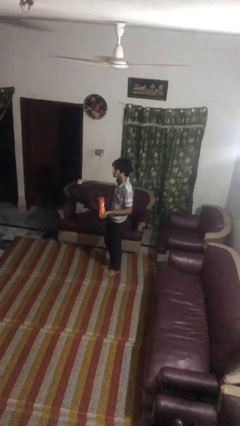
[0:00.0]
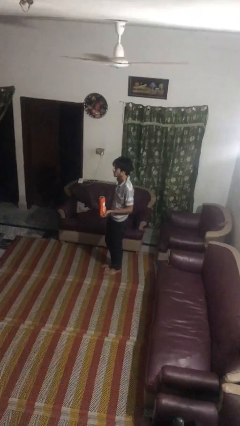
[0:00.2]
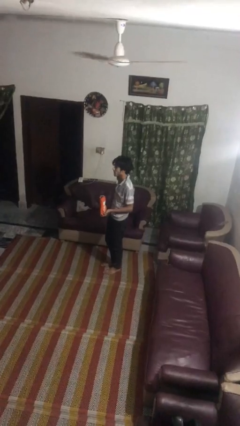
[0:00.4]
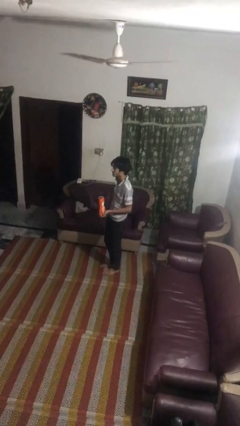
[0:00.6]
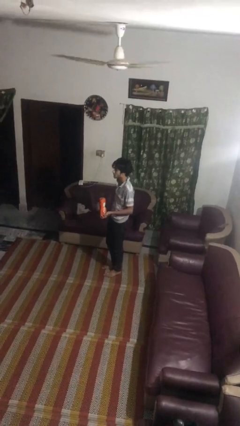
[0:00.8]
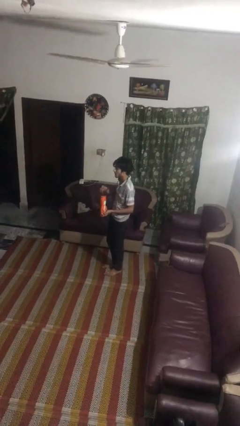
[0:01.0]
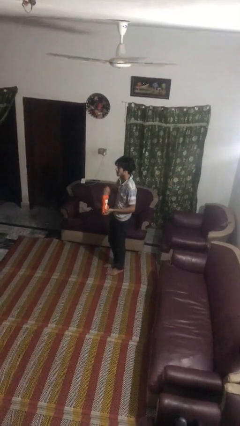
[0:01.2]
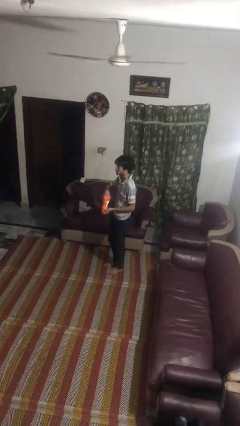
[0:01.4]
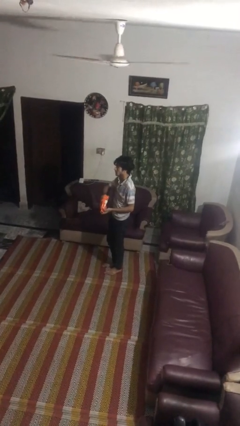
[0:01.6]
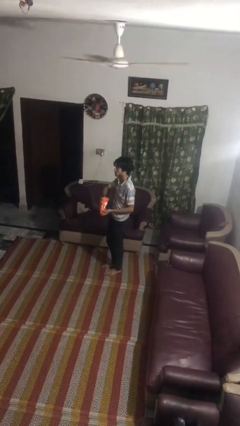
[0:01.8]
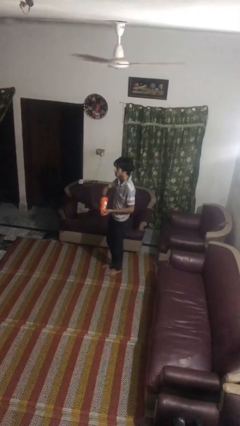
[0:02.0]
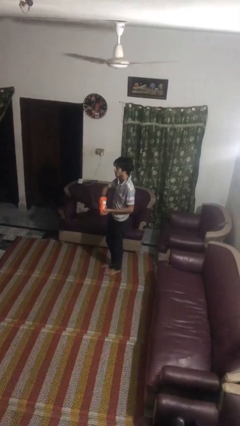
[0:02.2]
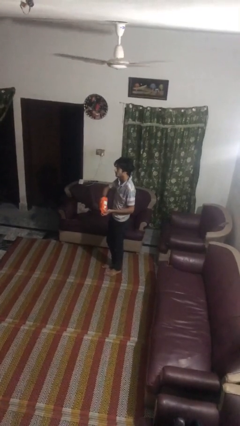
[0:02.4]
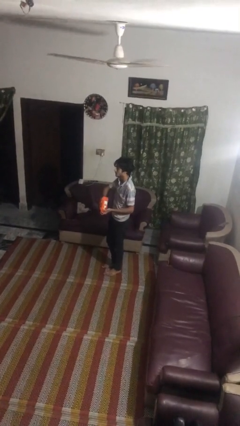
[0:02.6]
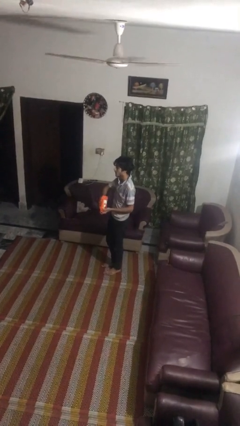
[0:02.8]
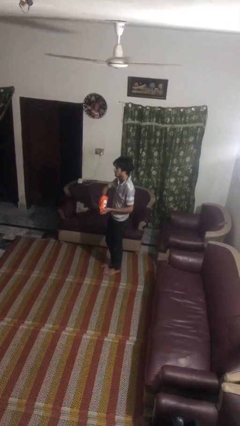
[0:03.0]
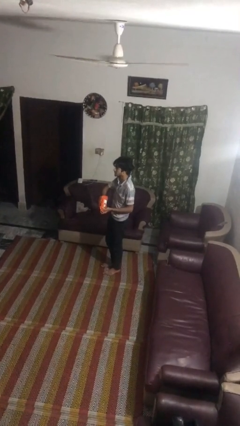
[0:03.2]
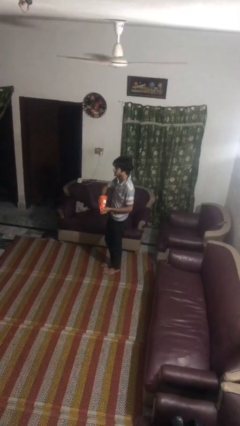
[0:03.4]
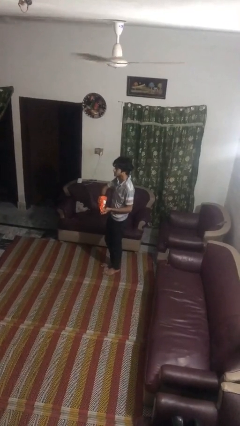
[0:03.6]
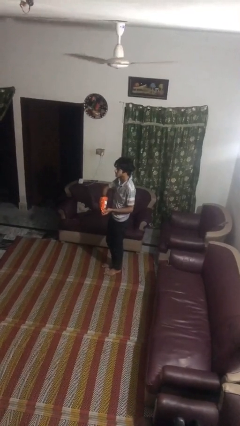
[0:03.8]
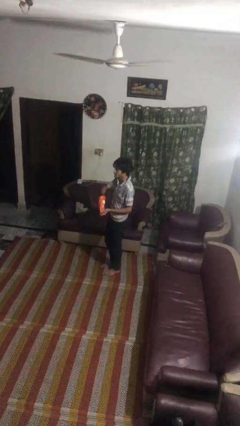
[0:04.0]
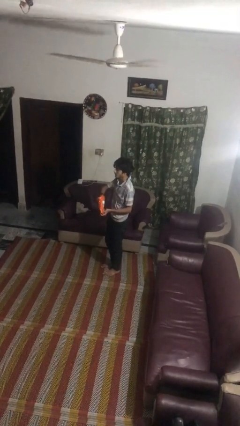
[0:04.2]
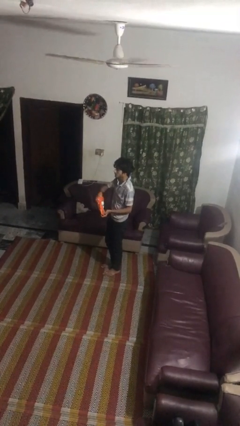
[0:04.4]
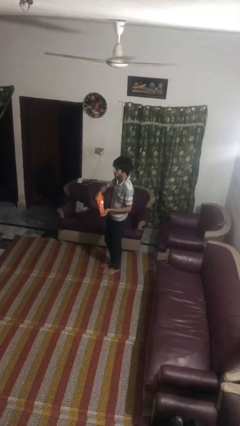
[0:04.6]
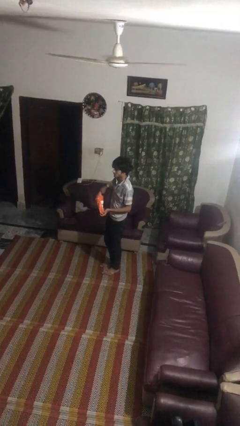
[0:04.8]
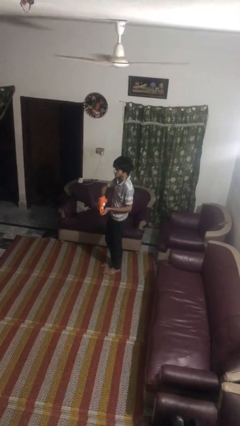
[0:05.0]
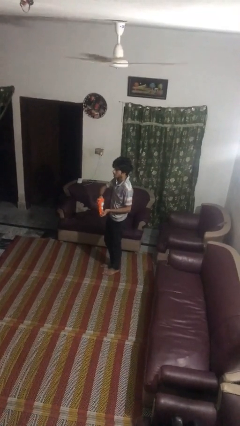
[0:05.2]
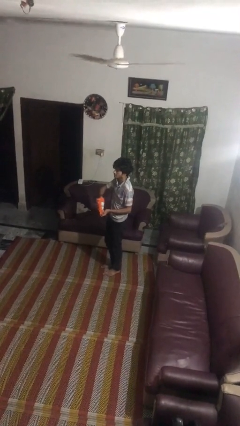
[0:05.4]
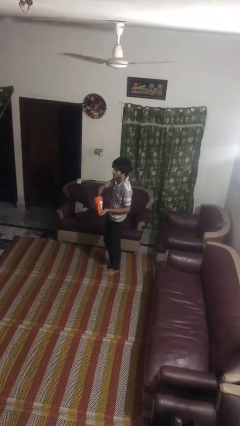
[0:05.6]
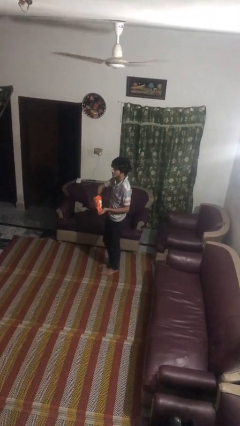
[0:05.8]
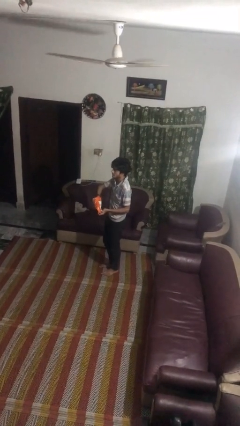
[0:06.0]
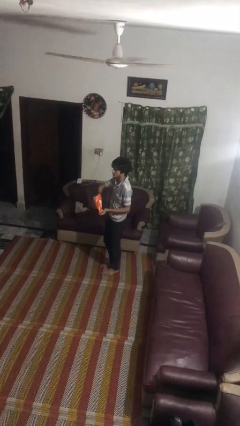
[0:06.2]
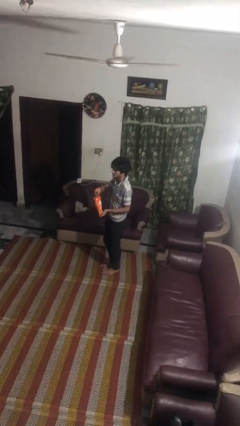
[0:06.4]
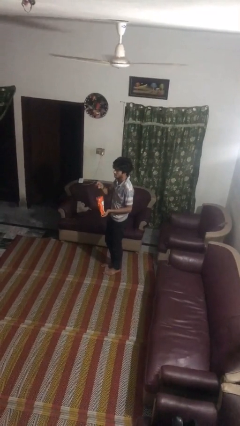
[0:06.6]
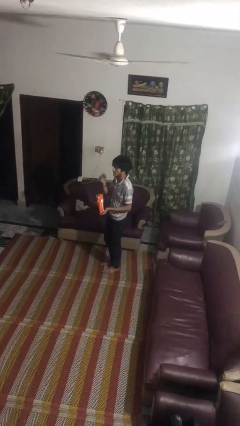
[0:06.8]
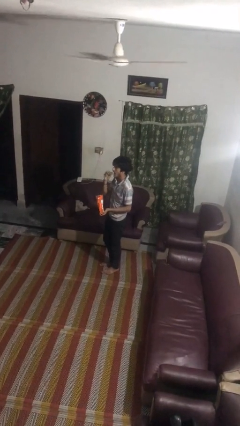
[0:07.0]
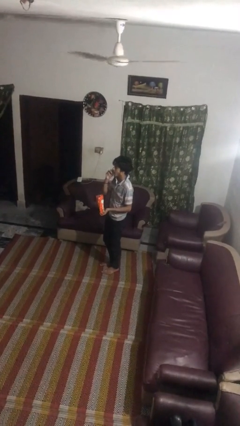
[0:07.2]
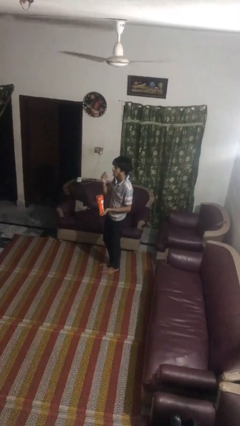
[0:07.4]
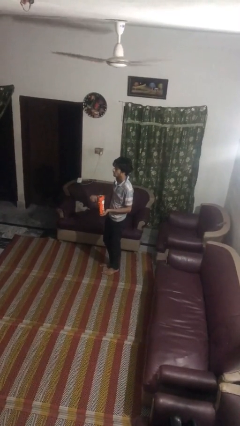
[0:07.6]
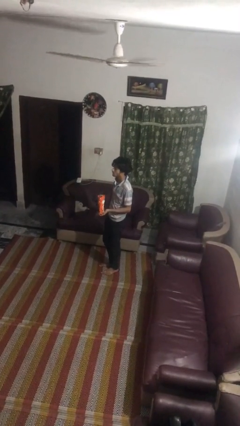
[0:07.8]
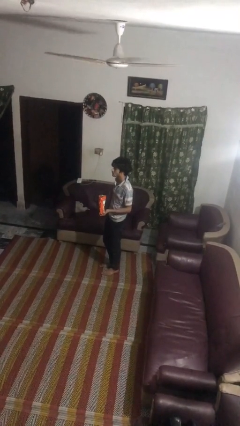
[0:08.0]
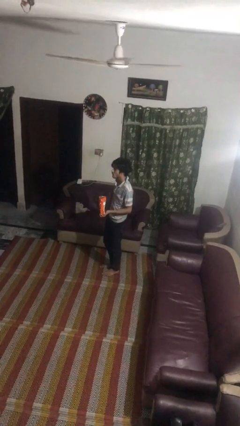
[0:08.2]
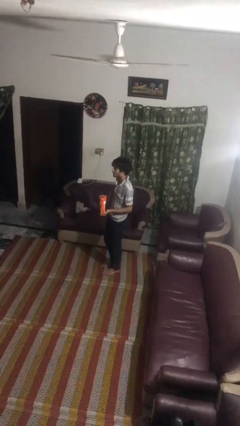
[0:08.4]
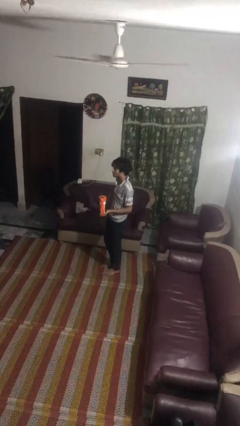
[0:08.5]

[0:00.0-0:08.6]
person eats snack from bag

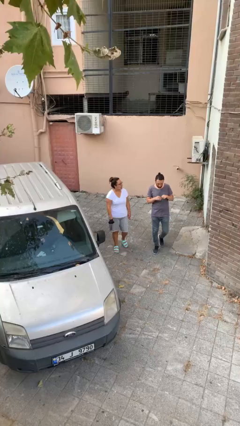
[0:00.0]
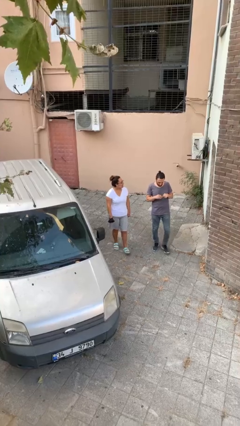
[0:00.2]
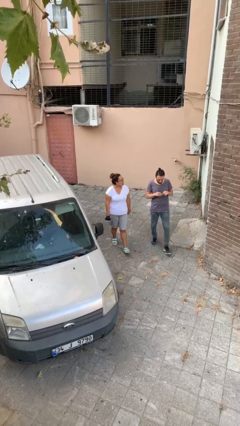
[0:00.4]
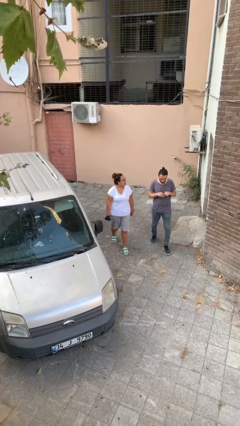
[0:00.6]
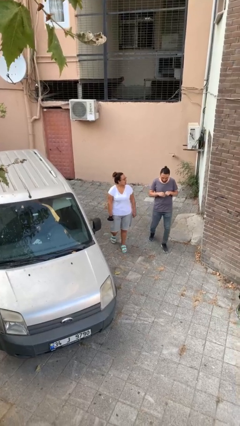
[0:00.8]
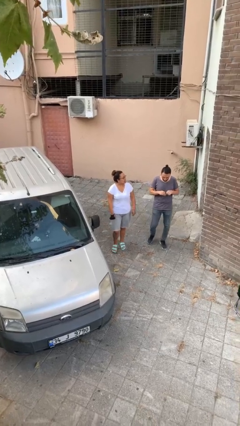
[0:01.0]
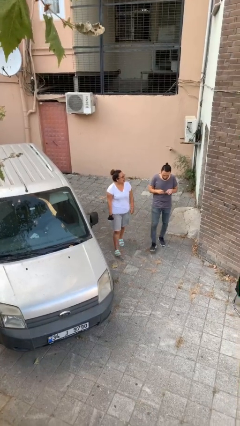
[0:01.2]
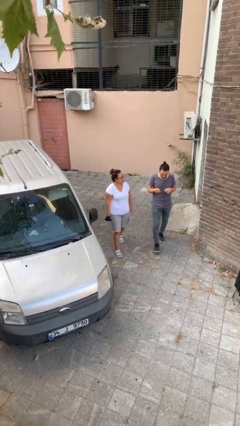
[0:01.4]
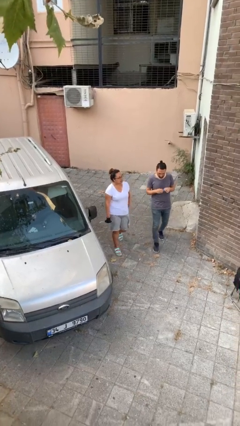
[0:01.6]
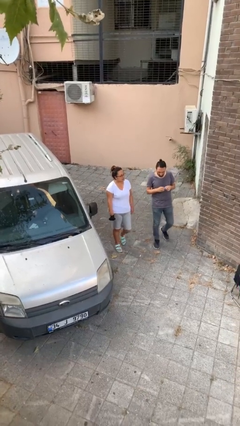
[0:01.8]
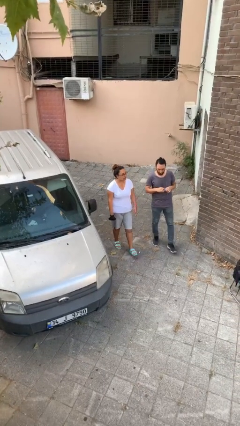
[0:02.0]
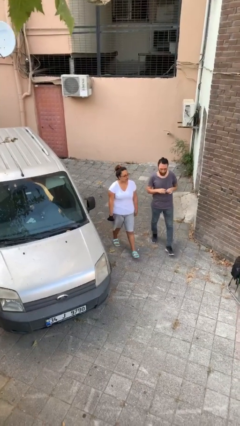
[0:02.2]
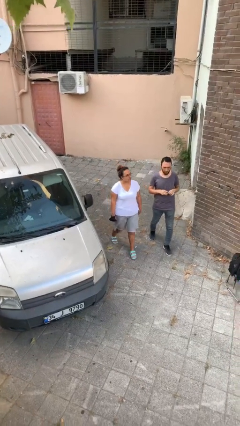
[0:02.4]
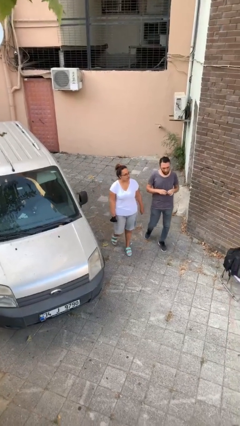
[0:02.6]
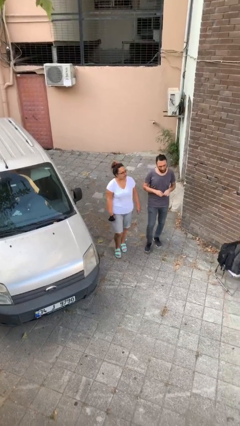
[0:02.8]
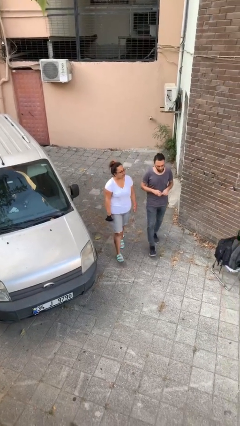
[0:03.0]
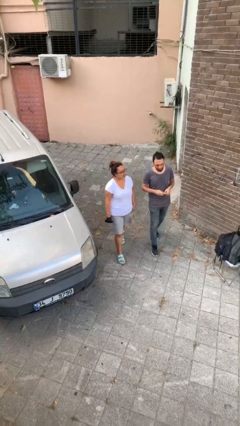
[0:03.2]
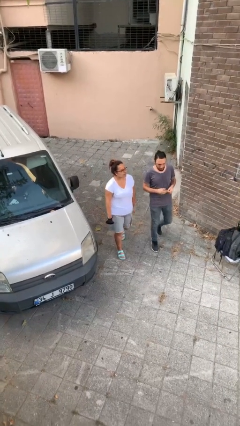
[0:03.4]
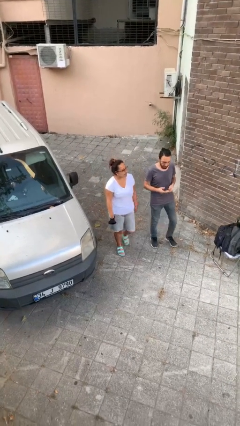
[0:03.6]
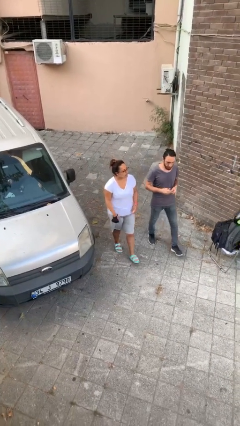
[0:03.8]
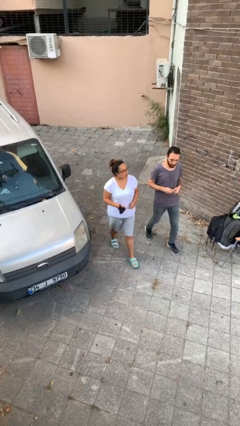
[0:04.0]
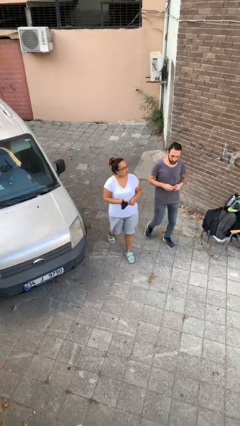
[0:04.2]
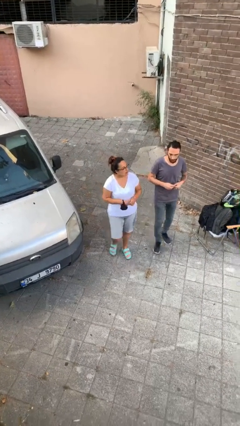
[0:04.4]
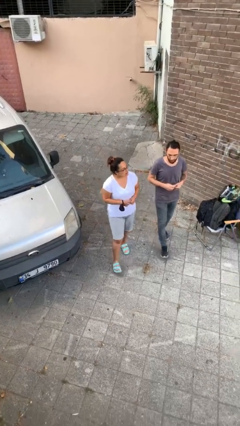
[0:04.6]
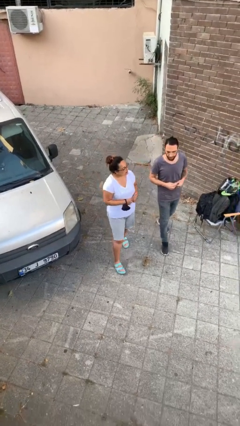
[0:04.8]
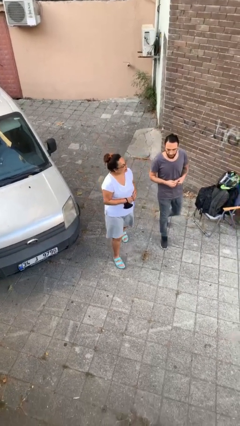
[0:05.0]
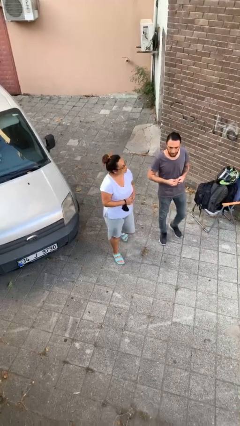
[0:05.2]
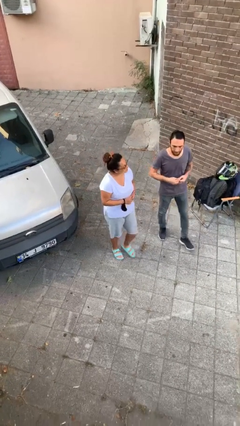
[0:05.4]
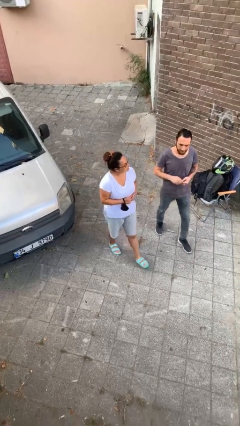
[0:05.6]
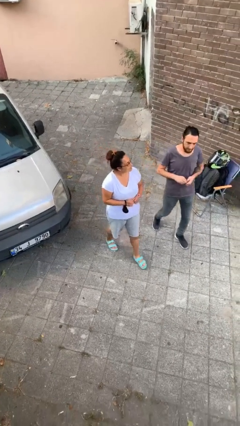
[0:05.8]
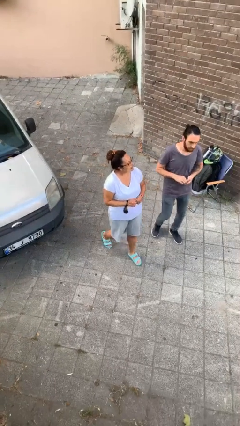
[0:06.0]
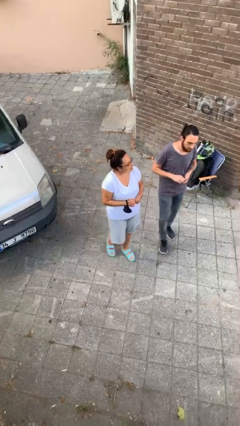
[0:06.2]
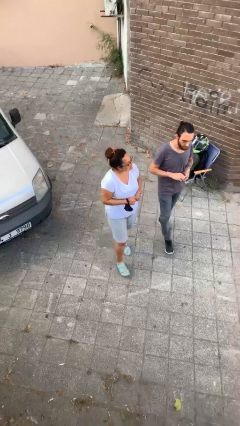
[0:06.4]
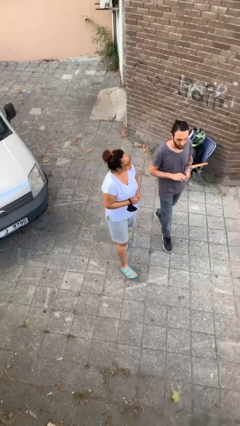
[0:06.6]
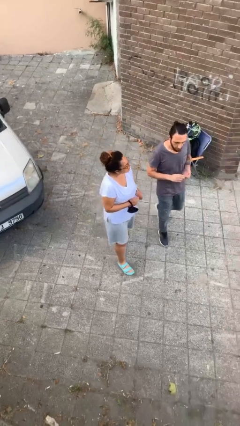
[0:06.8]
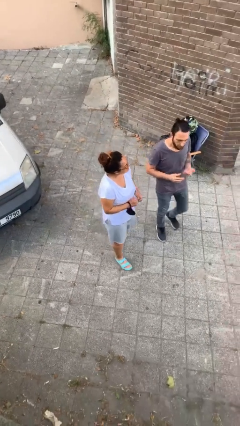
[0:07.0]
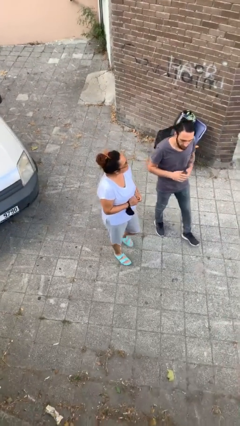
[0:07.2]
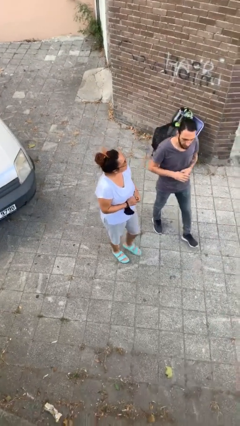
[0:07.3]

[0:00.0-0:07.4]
person talks to person

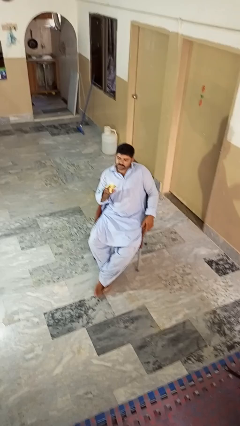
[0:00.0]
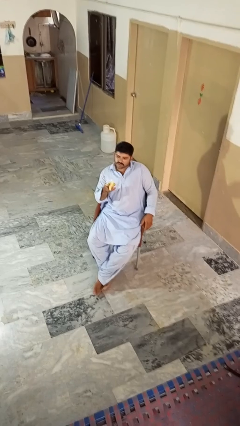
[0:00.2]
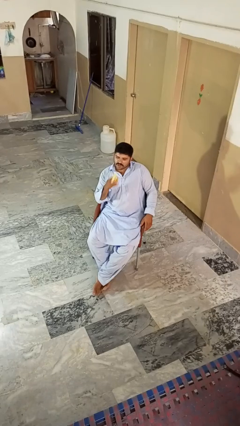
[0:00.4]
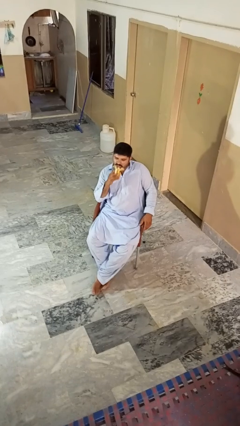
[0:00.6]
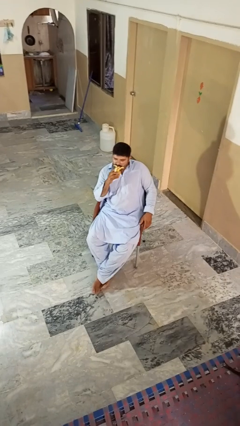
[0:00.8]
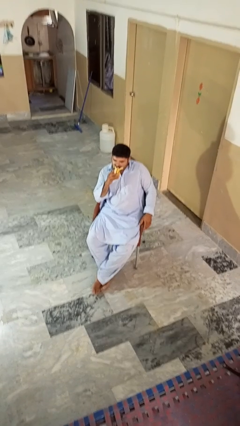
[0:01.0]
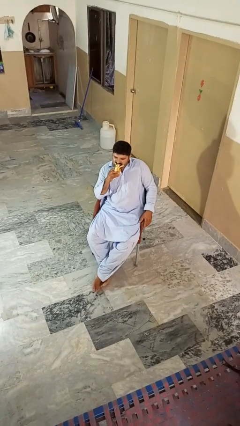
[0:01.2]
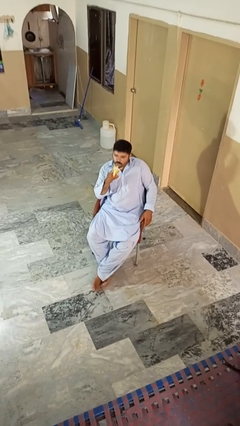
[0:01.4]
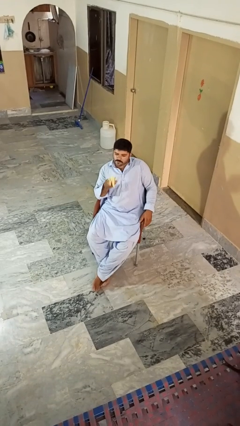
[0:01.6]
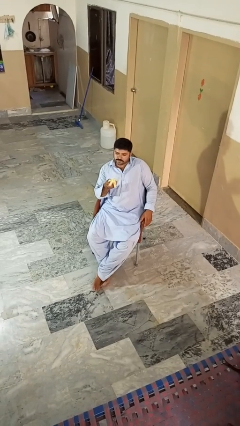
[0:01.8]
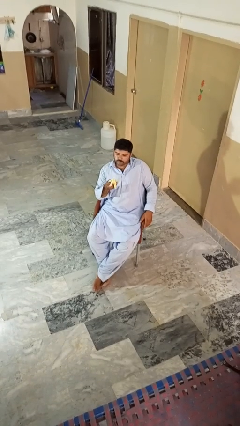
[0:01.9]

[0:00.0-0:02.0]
person eats banana

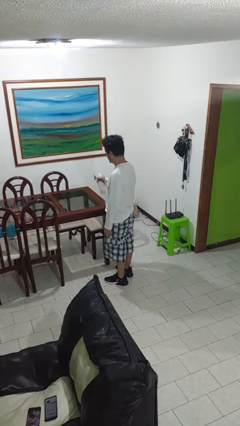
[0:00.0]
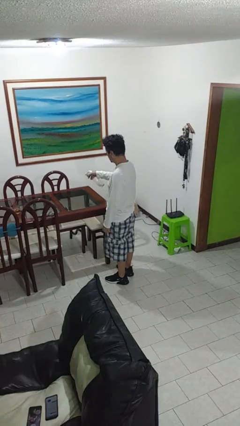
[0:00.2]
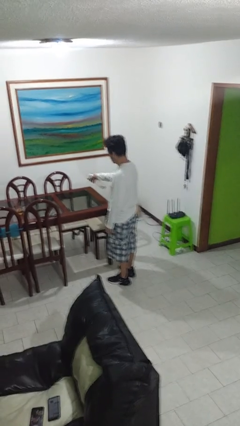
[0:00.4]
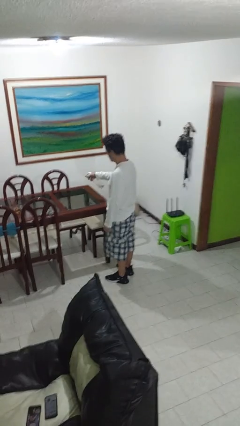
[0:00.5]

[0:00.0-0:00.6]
person sprays from bottle
